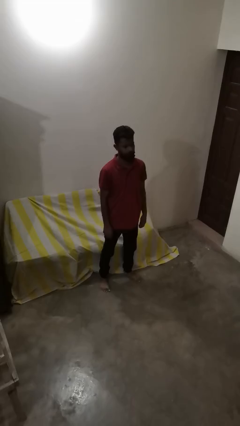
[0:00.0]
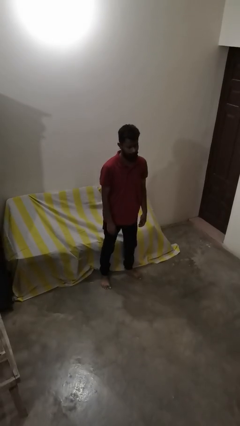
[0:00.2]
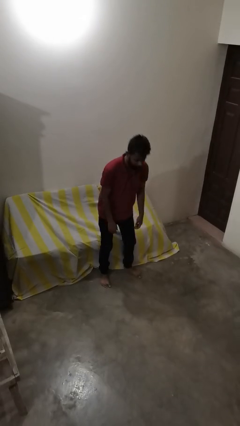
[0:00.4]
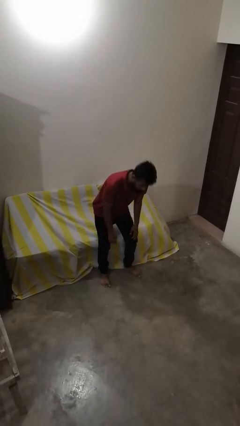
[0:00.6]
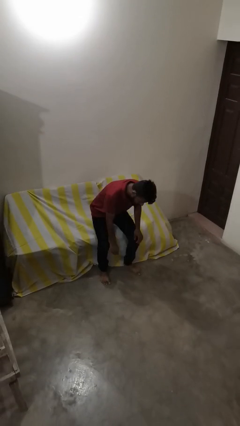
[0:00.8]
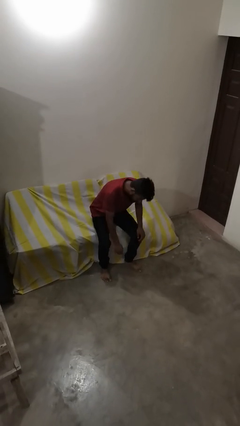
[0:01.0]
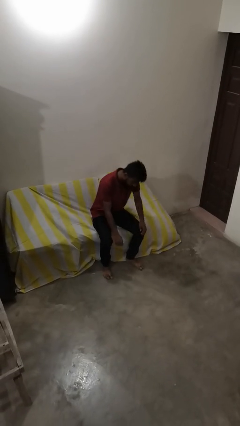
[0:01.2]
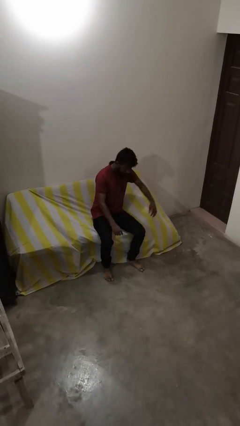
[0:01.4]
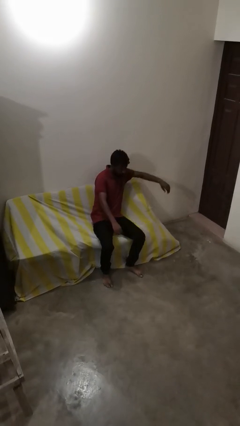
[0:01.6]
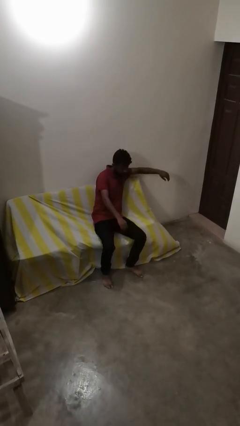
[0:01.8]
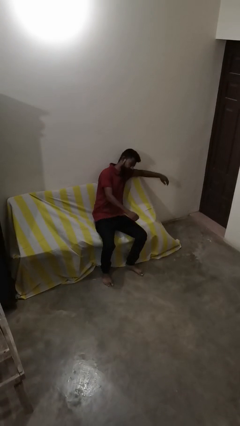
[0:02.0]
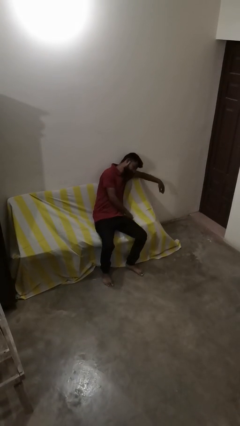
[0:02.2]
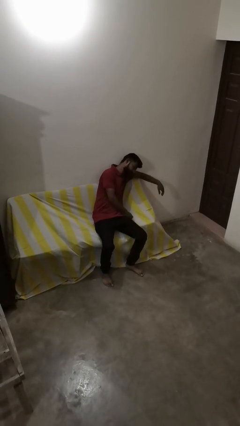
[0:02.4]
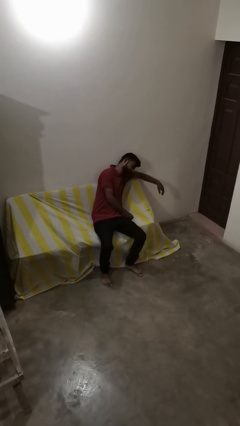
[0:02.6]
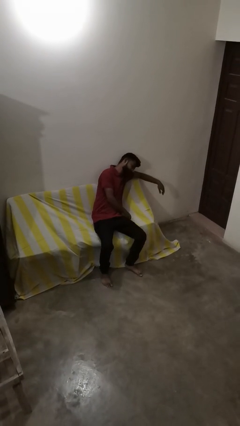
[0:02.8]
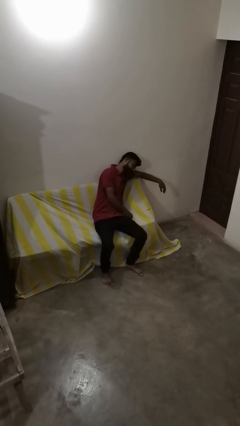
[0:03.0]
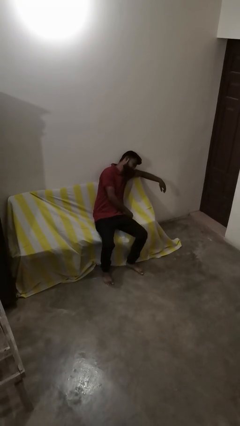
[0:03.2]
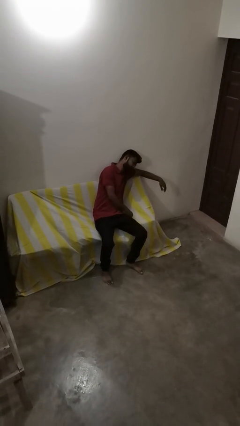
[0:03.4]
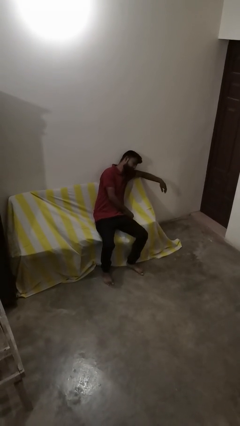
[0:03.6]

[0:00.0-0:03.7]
person lies down on couch

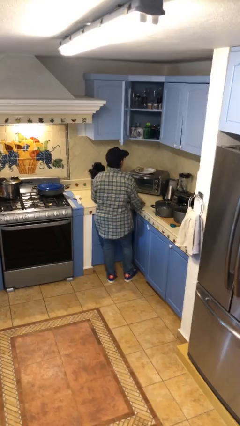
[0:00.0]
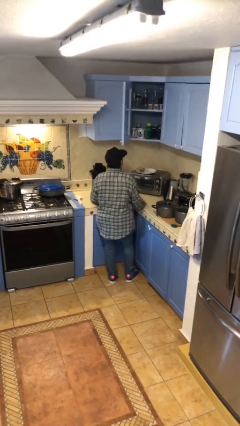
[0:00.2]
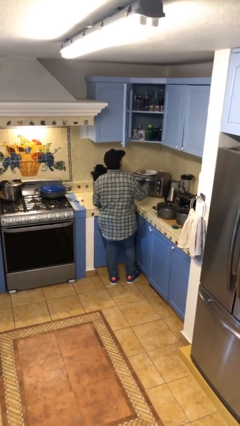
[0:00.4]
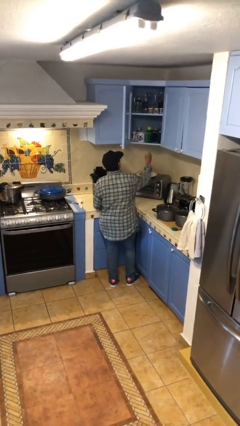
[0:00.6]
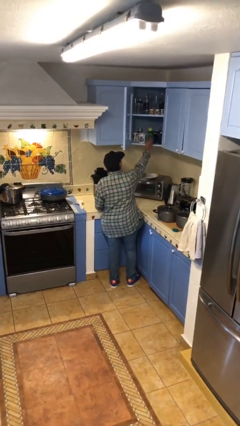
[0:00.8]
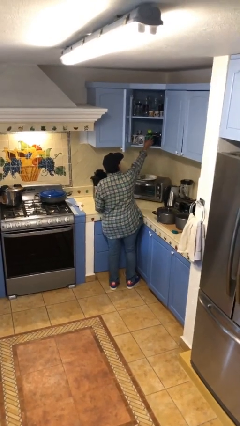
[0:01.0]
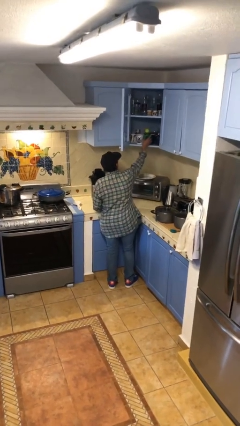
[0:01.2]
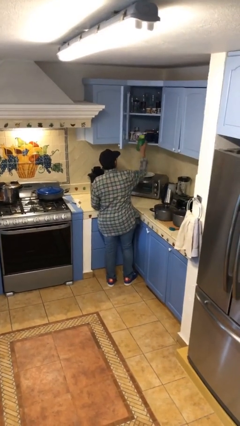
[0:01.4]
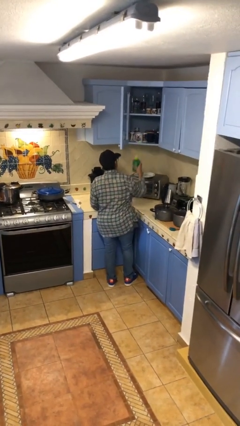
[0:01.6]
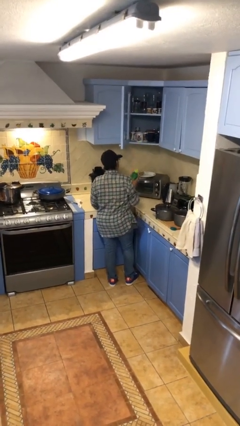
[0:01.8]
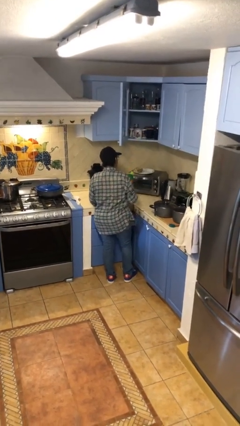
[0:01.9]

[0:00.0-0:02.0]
person picks up object from cabinet

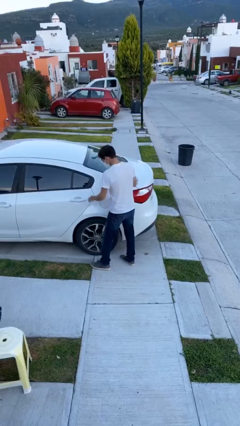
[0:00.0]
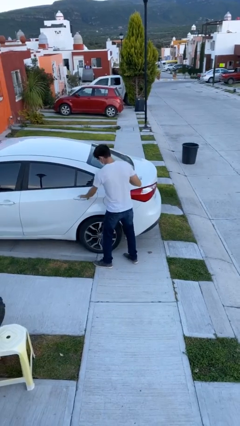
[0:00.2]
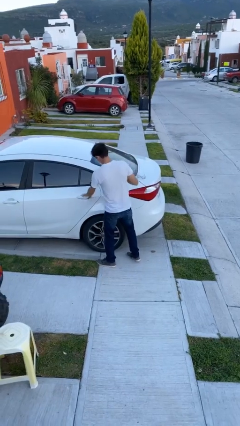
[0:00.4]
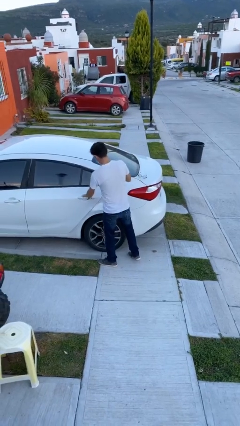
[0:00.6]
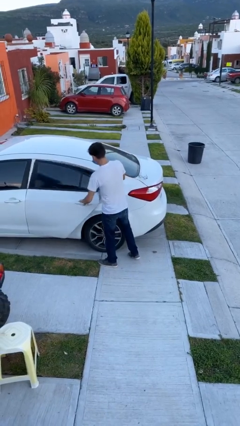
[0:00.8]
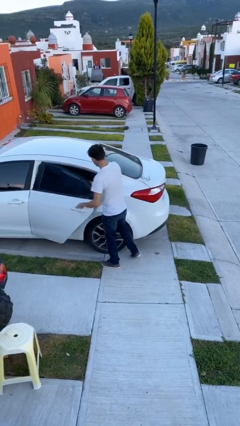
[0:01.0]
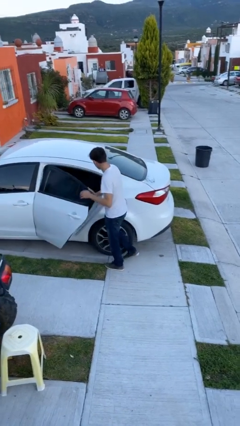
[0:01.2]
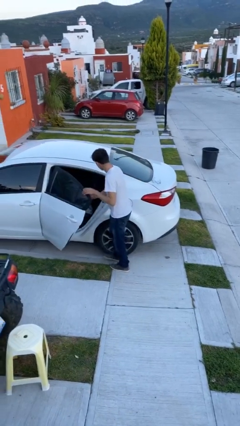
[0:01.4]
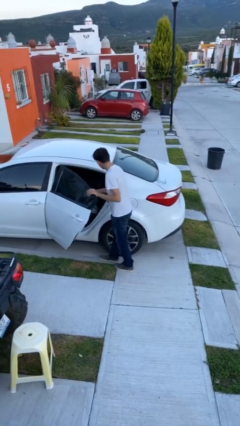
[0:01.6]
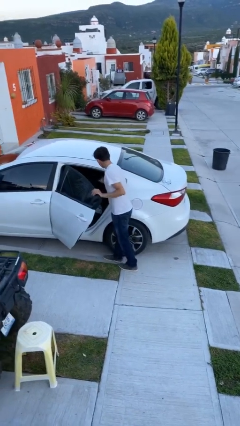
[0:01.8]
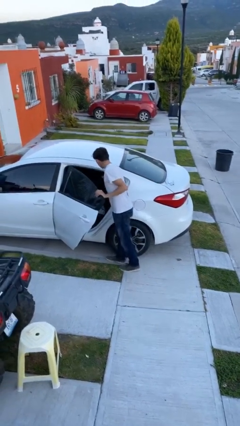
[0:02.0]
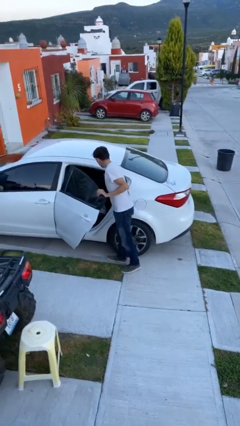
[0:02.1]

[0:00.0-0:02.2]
person opens car door

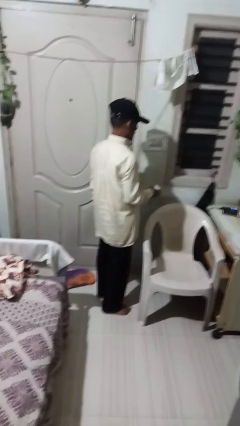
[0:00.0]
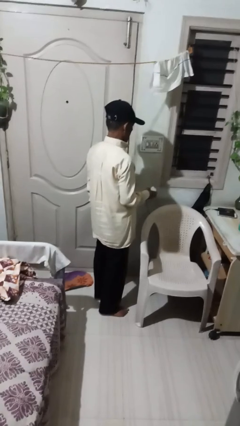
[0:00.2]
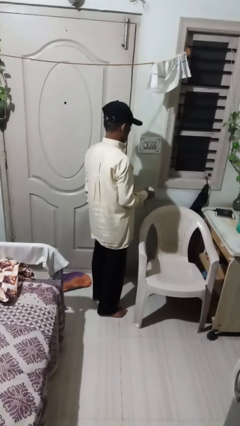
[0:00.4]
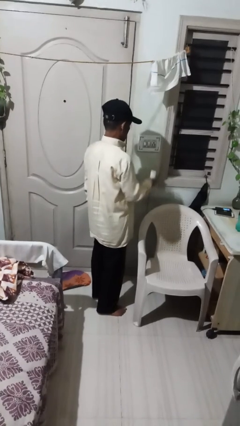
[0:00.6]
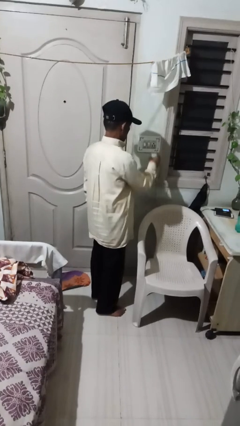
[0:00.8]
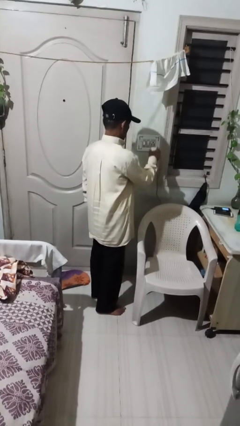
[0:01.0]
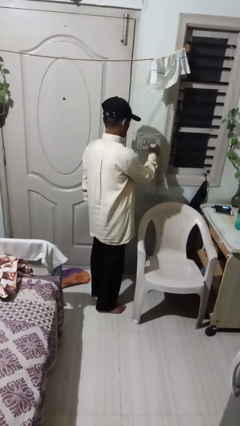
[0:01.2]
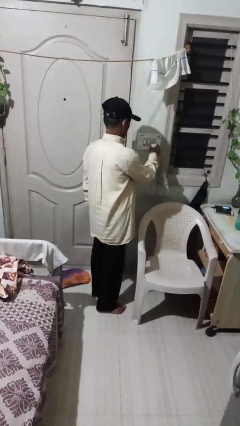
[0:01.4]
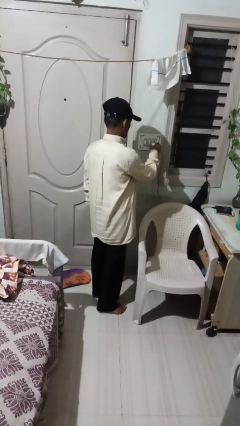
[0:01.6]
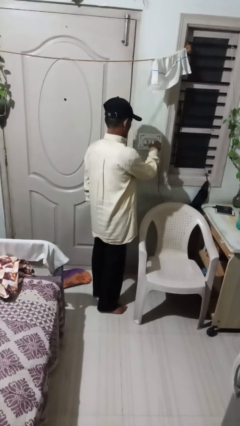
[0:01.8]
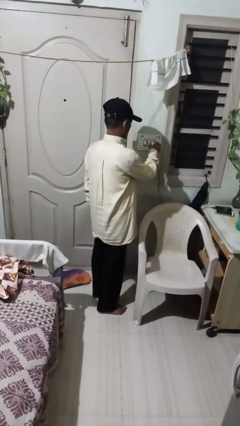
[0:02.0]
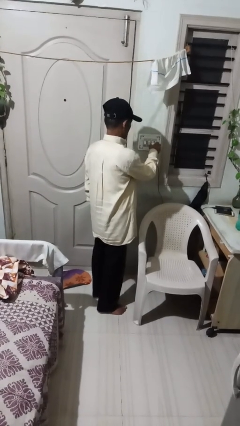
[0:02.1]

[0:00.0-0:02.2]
person plugs into electrical socket

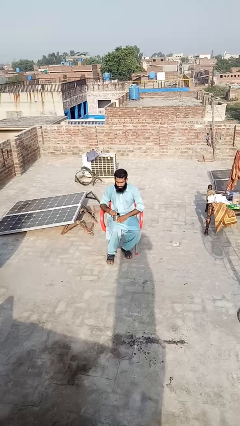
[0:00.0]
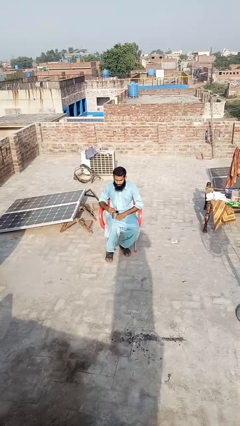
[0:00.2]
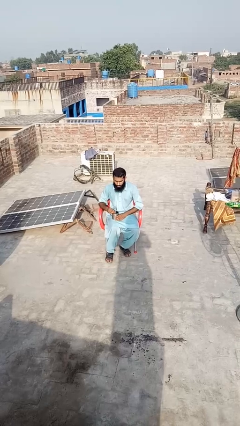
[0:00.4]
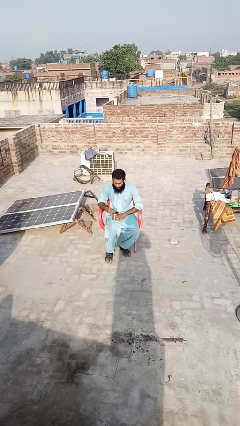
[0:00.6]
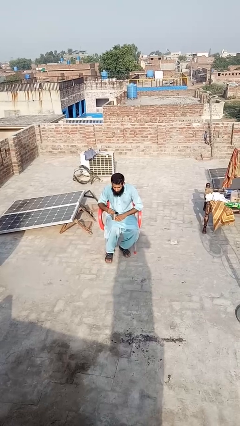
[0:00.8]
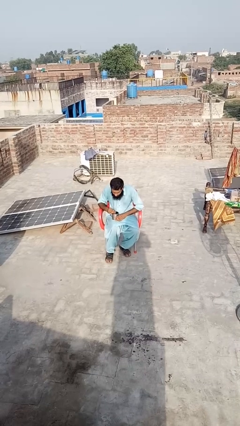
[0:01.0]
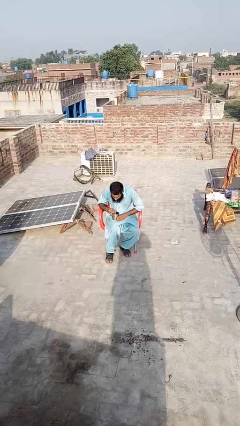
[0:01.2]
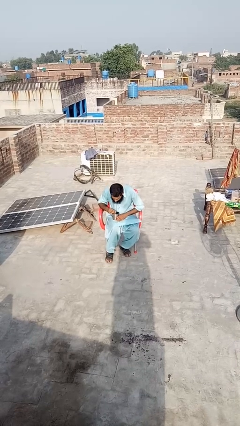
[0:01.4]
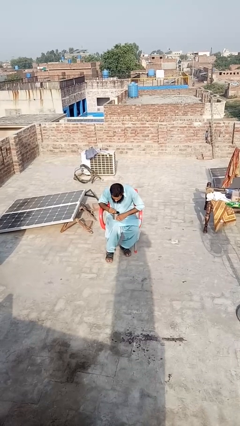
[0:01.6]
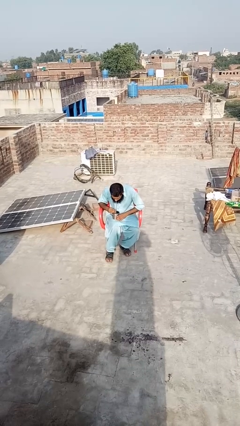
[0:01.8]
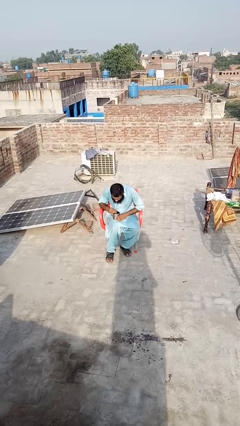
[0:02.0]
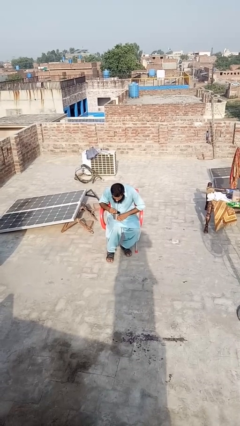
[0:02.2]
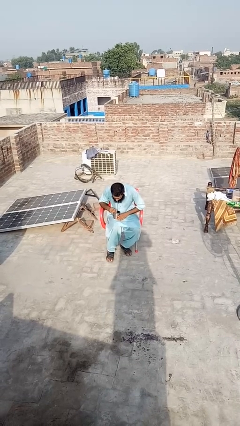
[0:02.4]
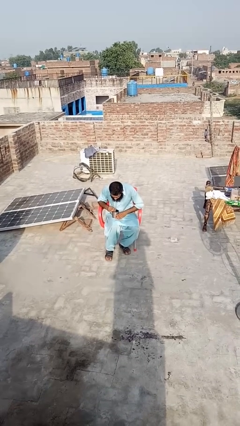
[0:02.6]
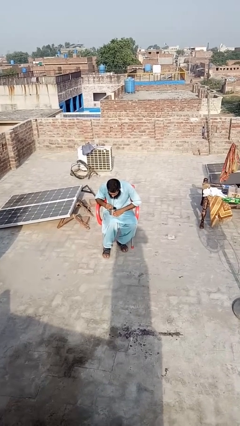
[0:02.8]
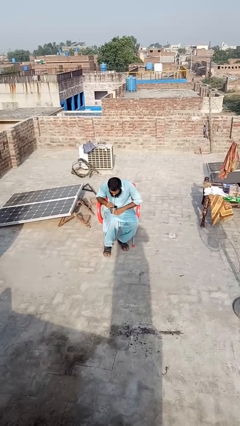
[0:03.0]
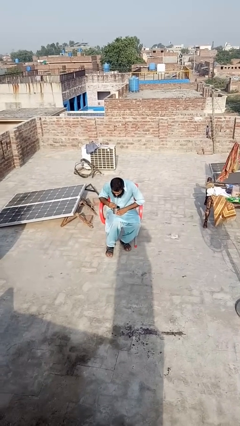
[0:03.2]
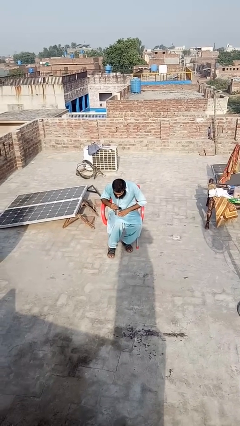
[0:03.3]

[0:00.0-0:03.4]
person drinks from straw

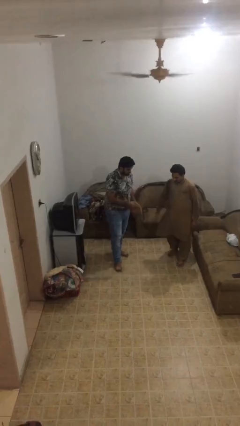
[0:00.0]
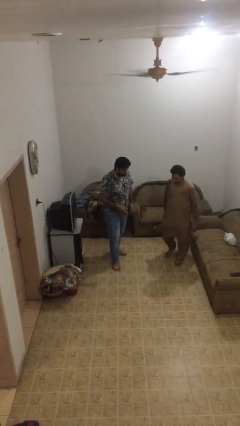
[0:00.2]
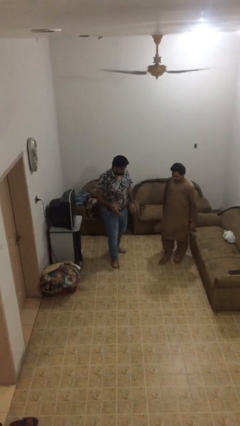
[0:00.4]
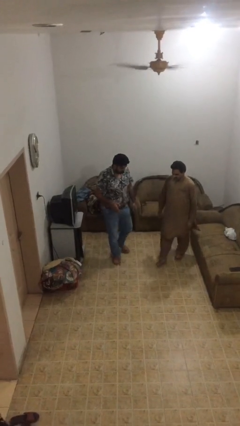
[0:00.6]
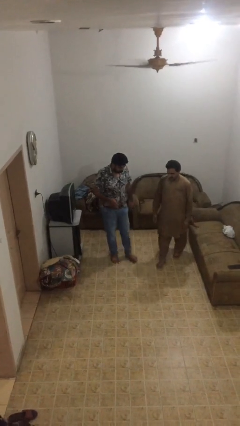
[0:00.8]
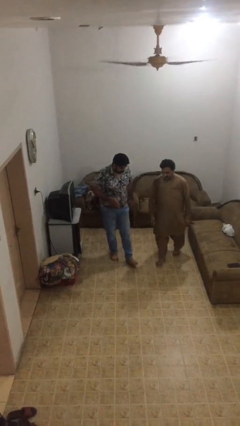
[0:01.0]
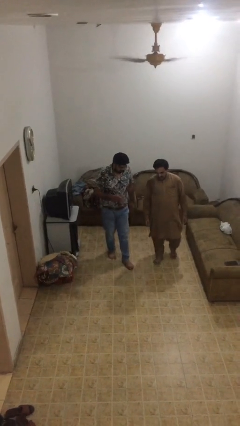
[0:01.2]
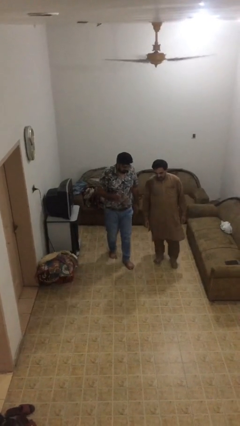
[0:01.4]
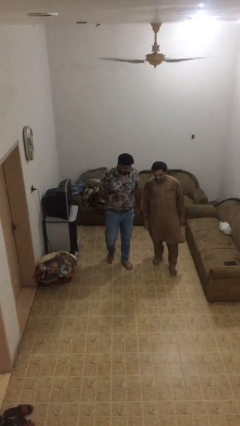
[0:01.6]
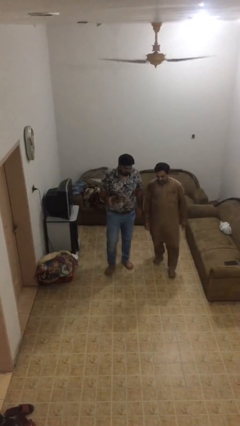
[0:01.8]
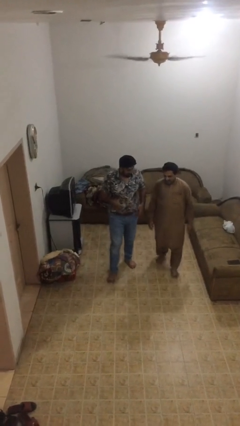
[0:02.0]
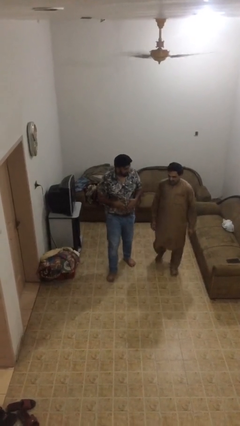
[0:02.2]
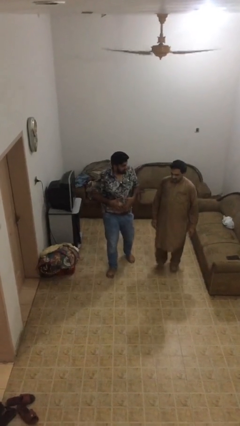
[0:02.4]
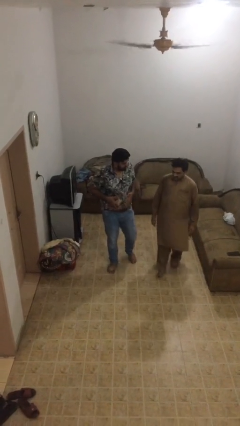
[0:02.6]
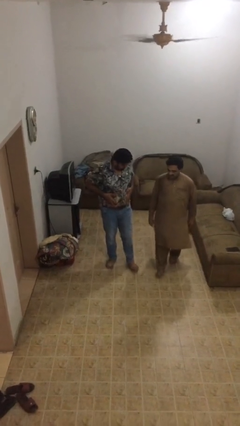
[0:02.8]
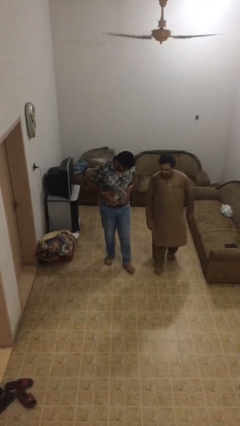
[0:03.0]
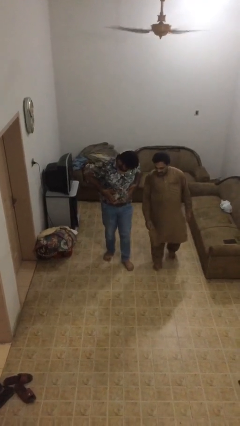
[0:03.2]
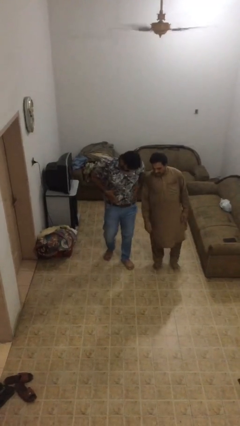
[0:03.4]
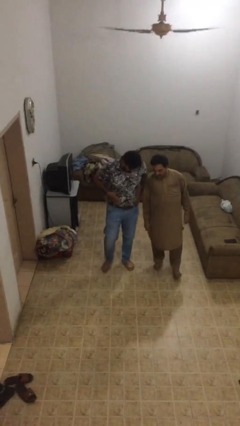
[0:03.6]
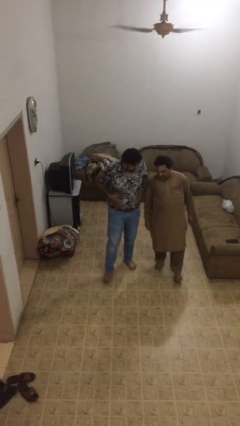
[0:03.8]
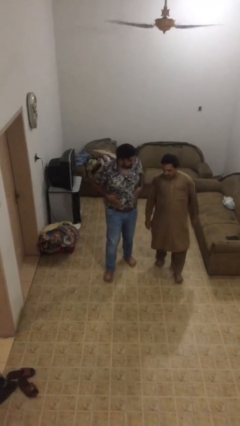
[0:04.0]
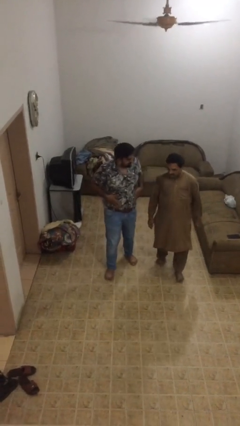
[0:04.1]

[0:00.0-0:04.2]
person talks to person
